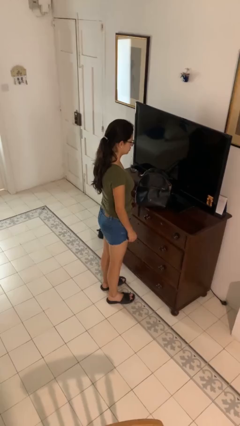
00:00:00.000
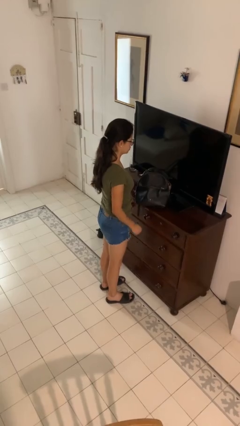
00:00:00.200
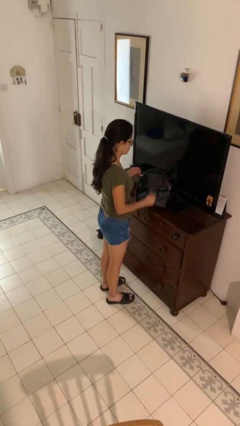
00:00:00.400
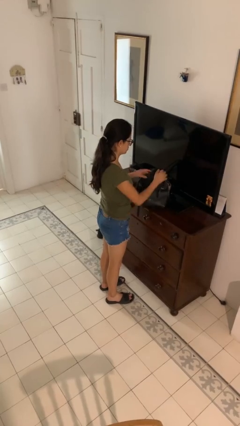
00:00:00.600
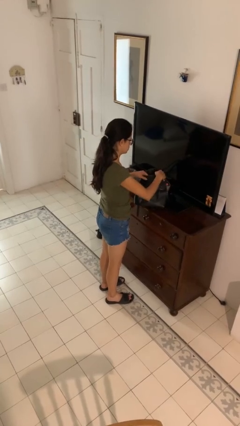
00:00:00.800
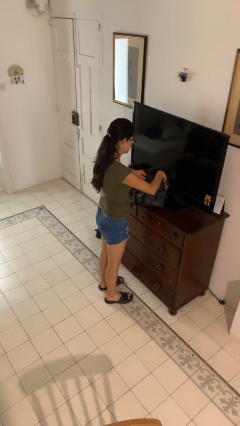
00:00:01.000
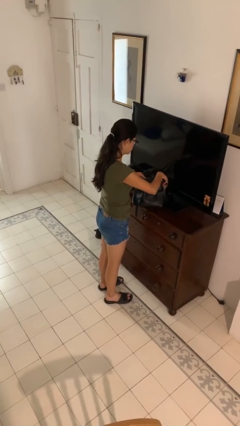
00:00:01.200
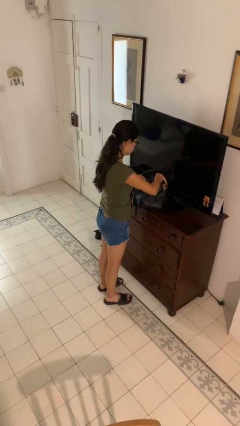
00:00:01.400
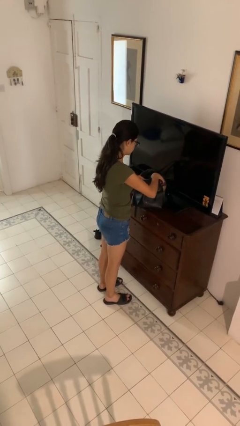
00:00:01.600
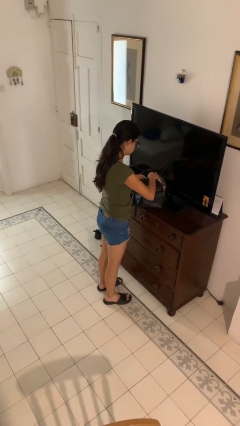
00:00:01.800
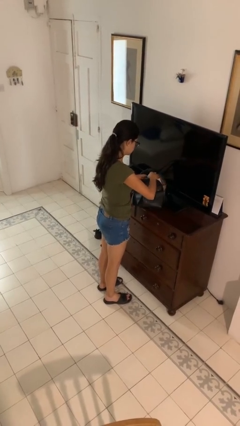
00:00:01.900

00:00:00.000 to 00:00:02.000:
person searches in purse

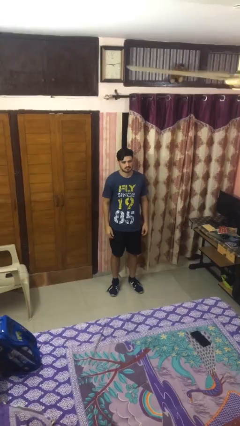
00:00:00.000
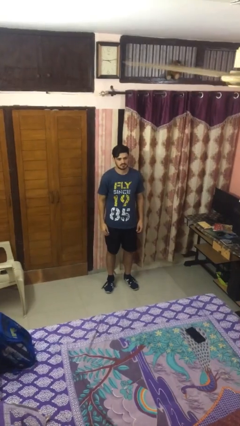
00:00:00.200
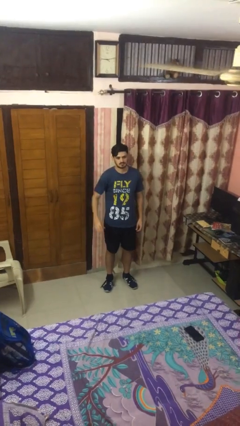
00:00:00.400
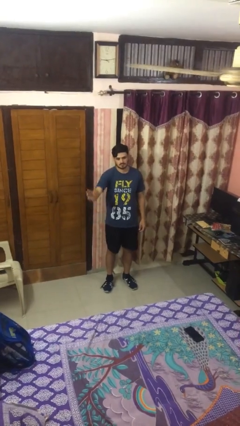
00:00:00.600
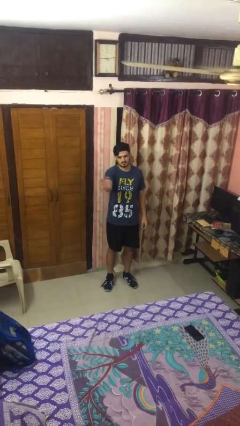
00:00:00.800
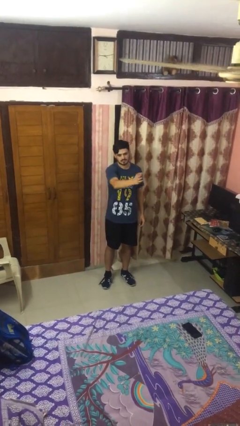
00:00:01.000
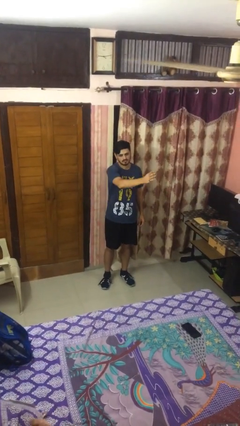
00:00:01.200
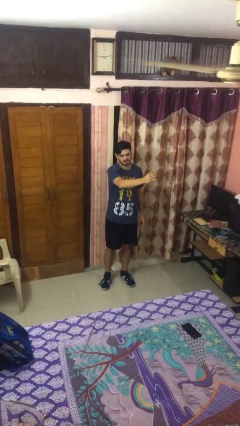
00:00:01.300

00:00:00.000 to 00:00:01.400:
person gestures swipe left

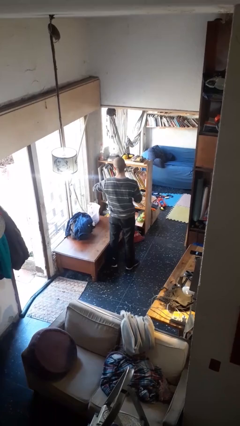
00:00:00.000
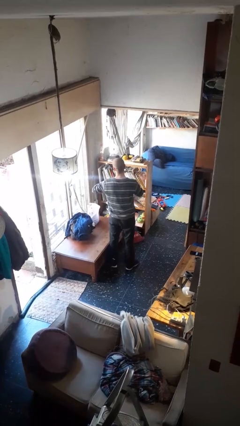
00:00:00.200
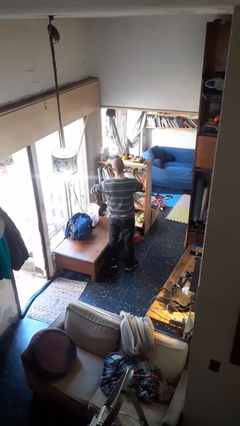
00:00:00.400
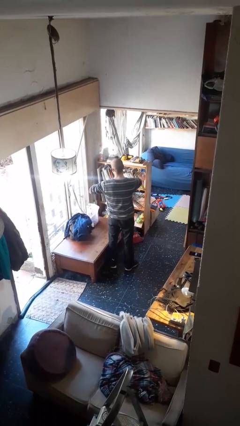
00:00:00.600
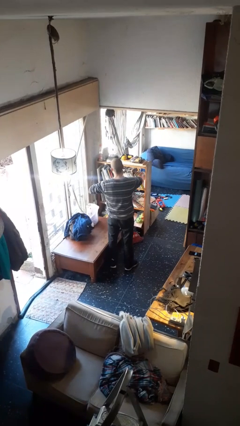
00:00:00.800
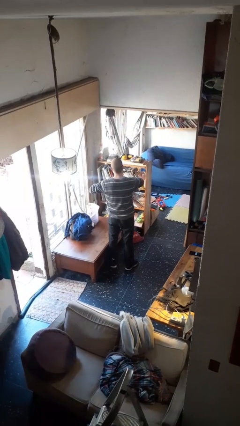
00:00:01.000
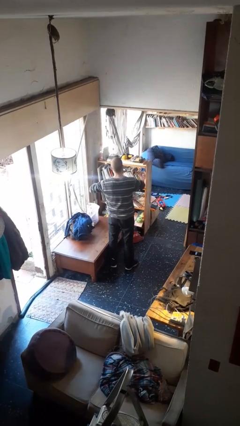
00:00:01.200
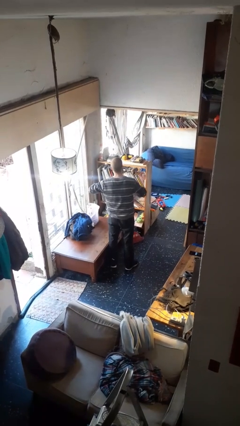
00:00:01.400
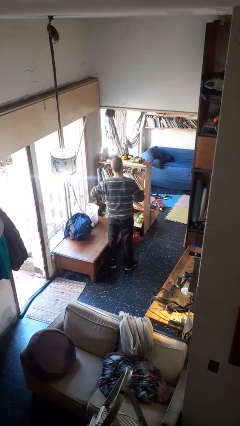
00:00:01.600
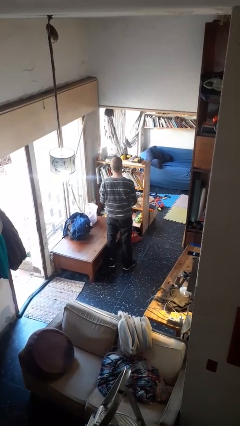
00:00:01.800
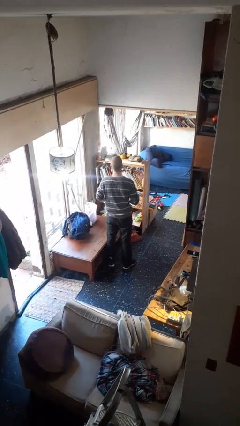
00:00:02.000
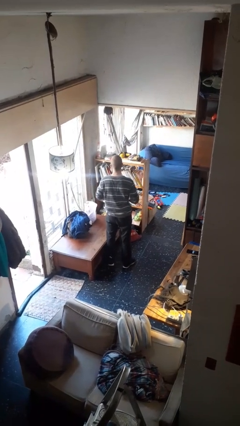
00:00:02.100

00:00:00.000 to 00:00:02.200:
person takes off ring

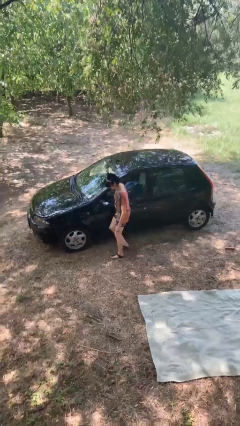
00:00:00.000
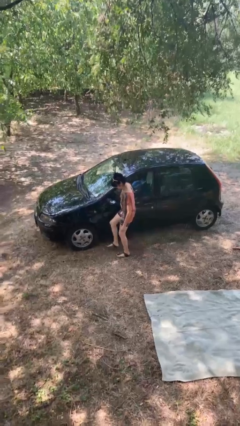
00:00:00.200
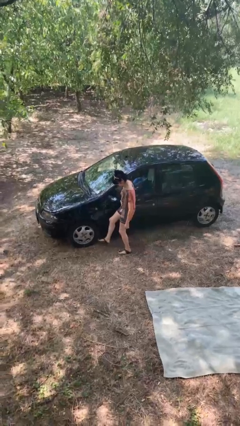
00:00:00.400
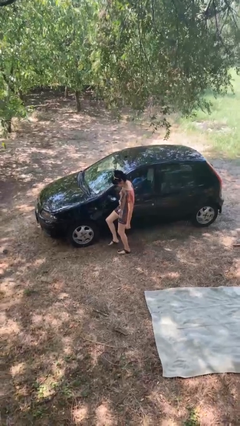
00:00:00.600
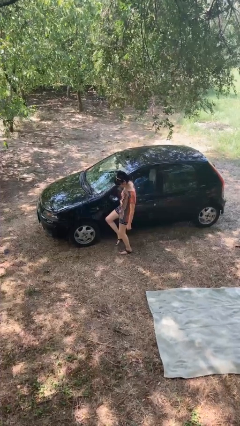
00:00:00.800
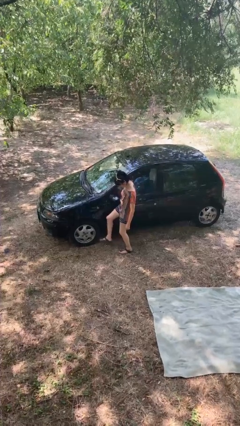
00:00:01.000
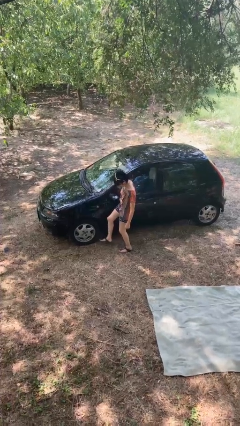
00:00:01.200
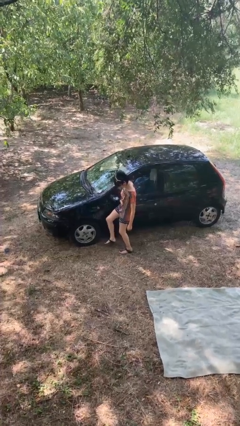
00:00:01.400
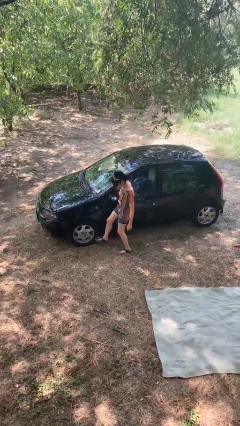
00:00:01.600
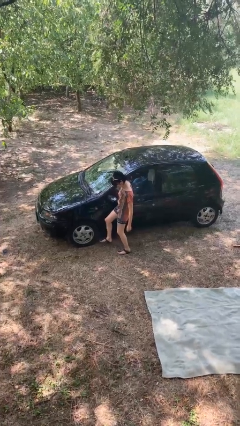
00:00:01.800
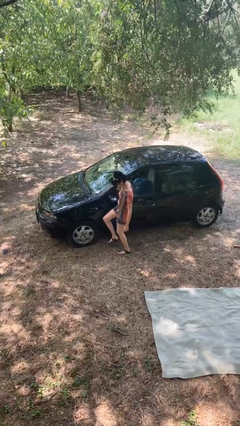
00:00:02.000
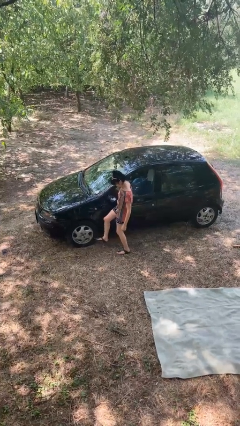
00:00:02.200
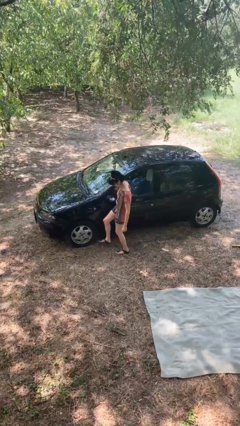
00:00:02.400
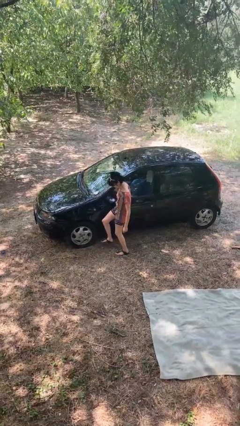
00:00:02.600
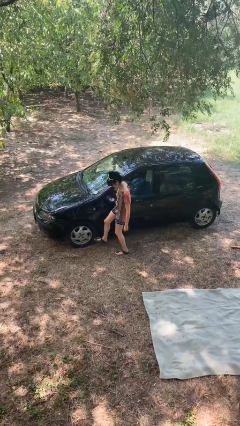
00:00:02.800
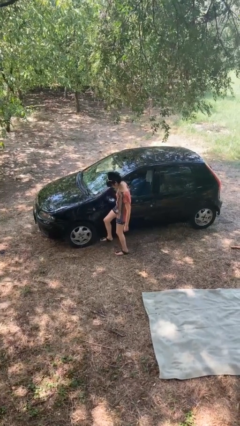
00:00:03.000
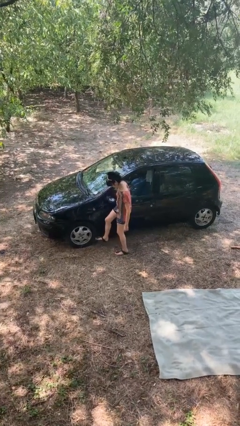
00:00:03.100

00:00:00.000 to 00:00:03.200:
person kicks car tires

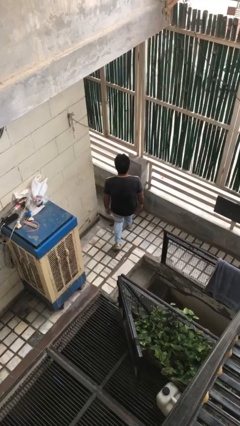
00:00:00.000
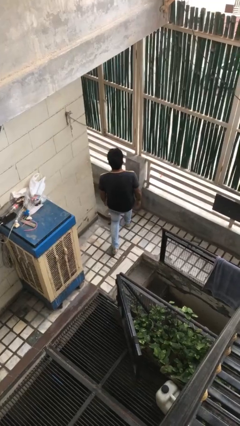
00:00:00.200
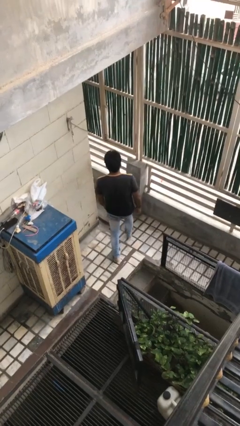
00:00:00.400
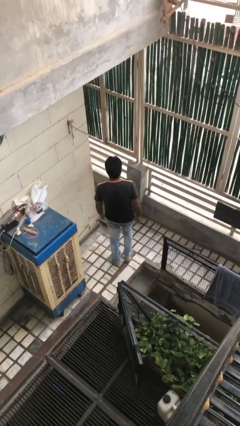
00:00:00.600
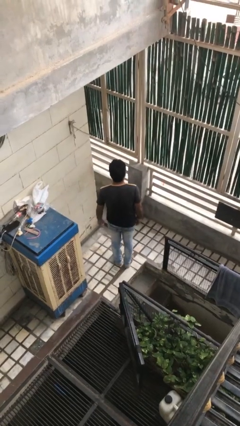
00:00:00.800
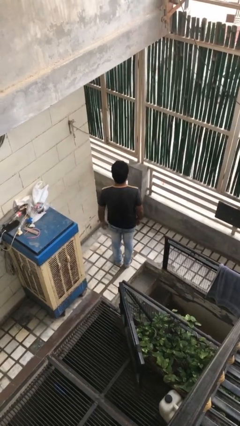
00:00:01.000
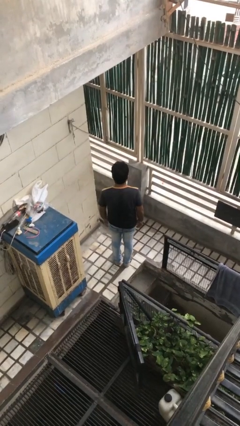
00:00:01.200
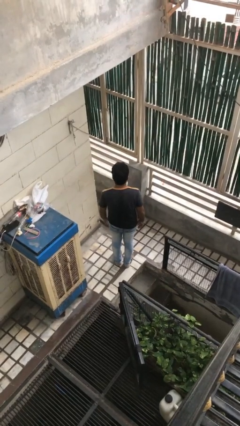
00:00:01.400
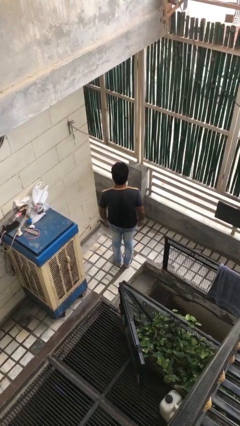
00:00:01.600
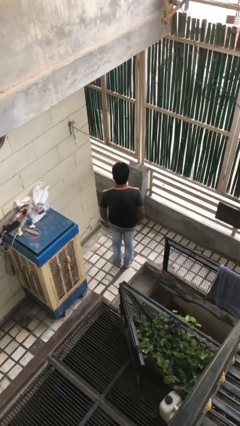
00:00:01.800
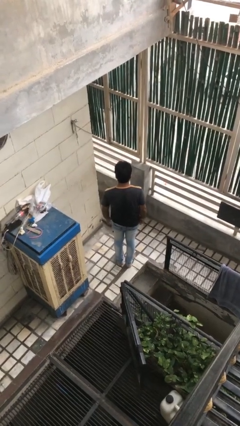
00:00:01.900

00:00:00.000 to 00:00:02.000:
person stands up from floor

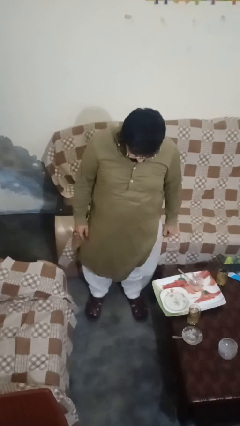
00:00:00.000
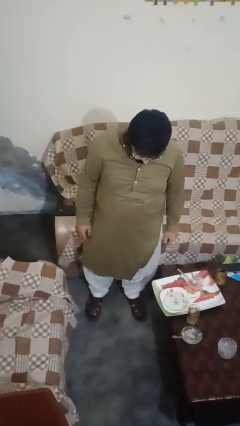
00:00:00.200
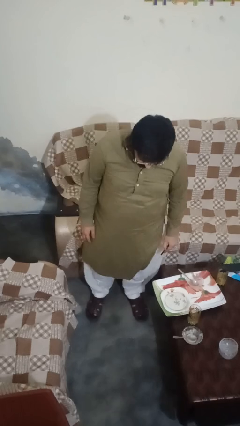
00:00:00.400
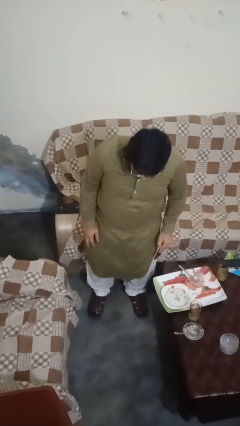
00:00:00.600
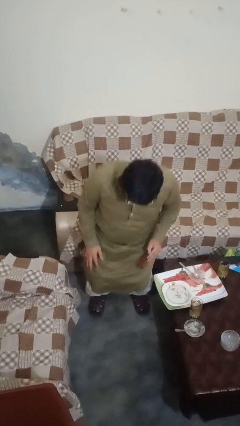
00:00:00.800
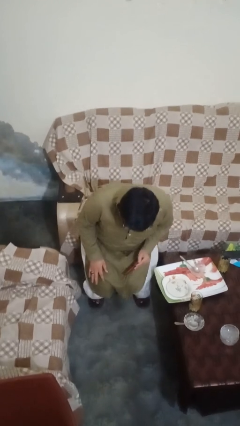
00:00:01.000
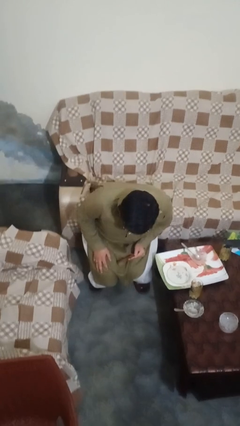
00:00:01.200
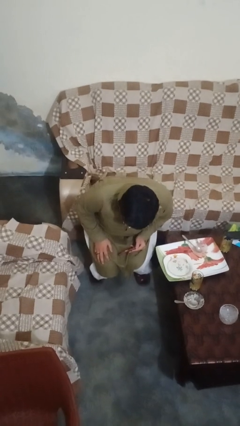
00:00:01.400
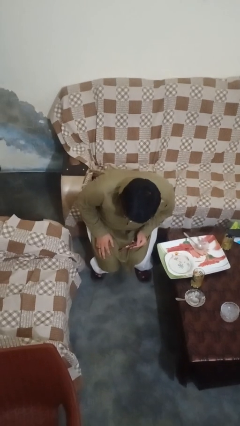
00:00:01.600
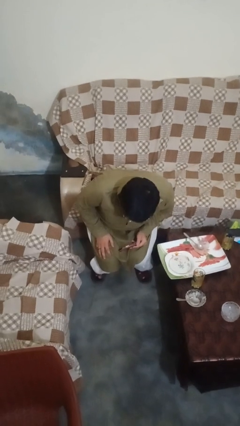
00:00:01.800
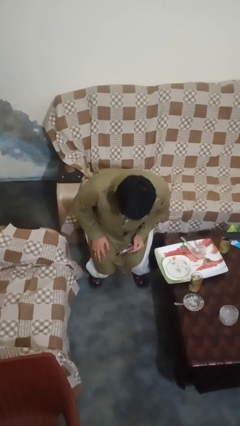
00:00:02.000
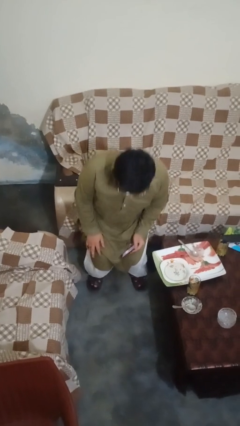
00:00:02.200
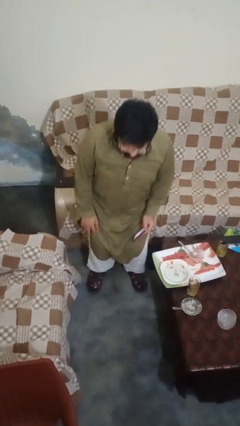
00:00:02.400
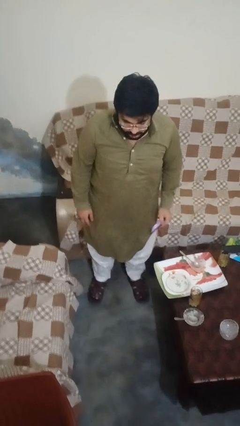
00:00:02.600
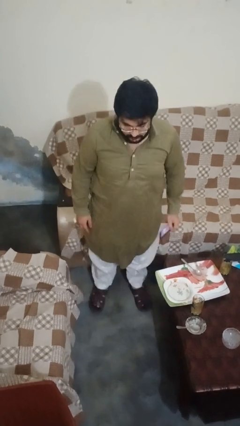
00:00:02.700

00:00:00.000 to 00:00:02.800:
person squats

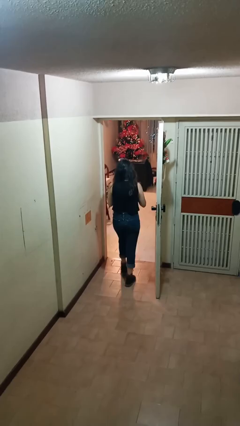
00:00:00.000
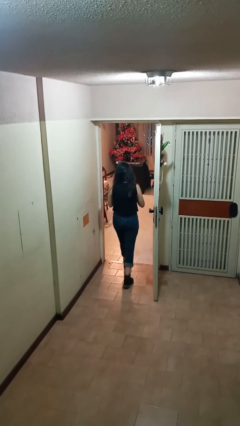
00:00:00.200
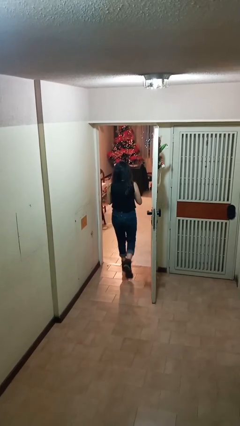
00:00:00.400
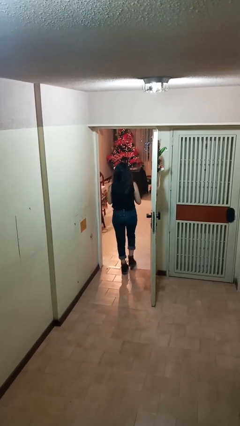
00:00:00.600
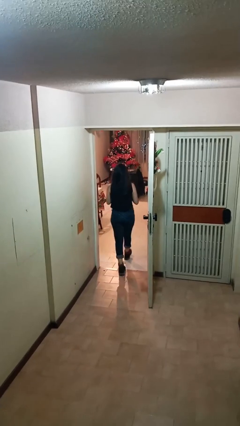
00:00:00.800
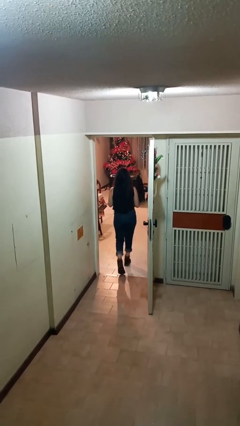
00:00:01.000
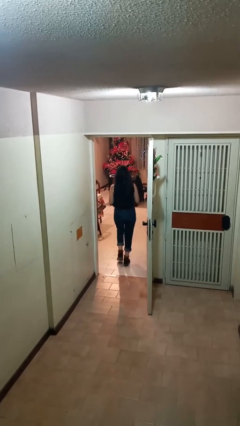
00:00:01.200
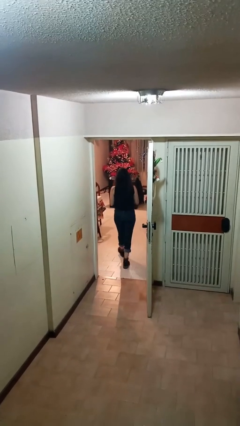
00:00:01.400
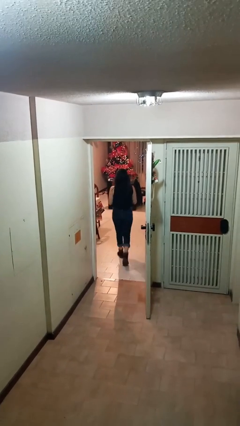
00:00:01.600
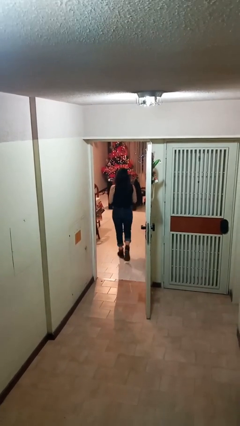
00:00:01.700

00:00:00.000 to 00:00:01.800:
person exits scene through structure

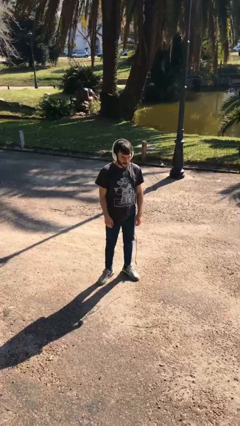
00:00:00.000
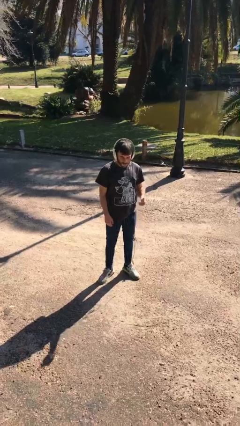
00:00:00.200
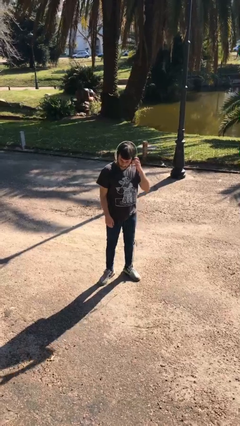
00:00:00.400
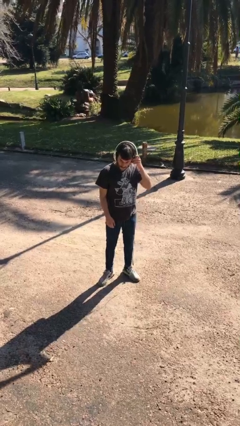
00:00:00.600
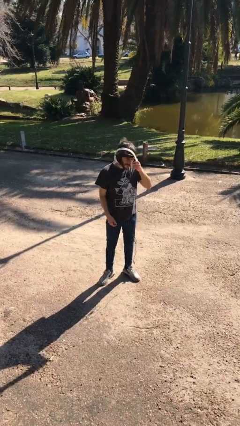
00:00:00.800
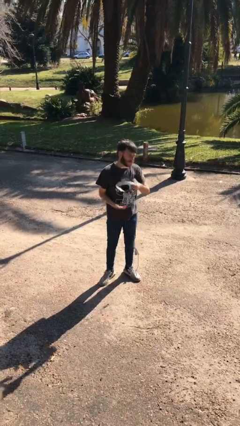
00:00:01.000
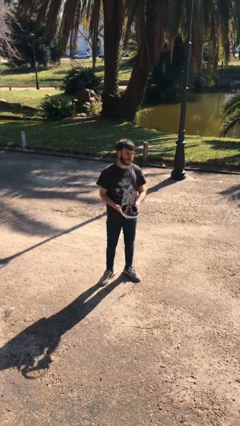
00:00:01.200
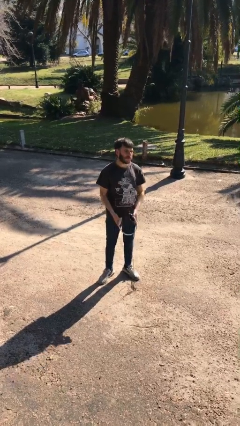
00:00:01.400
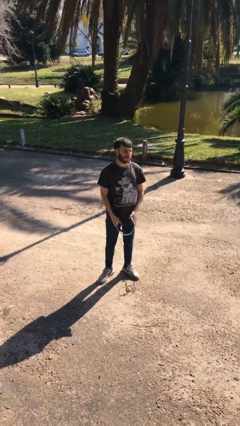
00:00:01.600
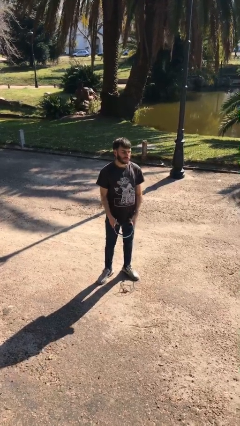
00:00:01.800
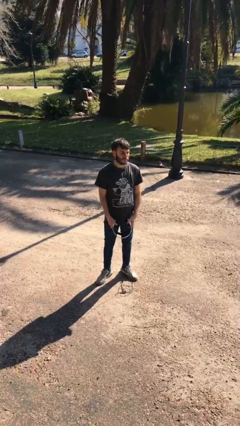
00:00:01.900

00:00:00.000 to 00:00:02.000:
person takes off headphones
